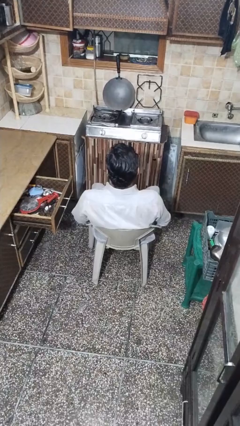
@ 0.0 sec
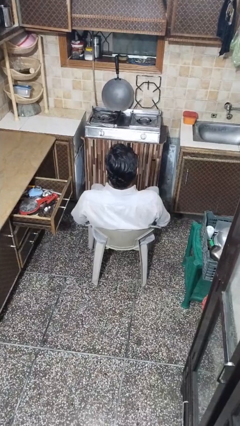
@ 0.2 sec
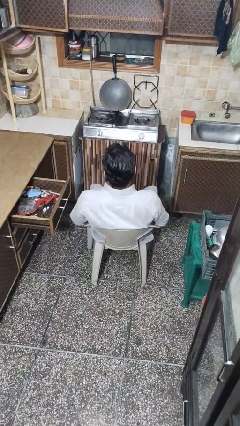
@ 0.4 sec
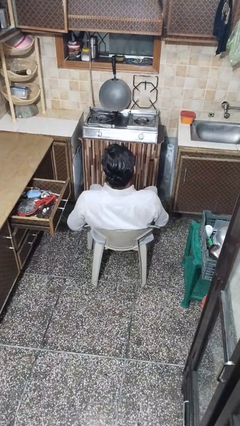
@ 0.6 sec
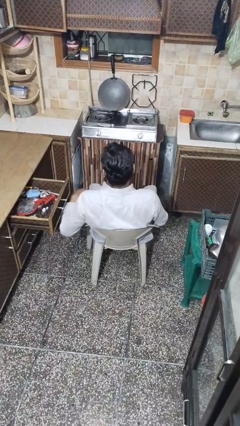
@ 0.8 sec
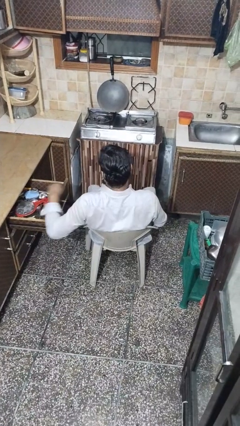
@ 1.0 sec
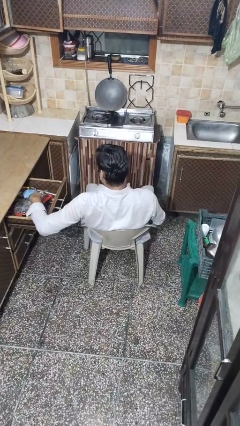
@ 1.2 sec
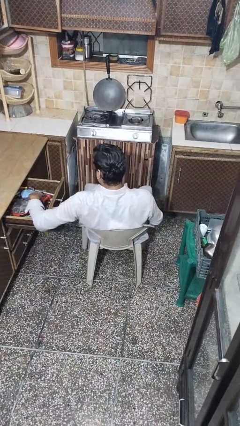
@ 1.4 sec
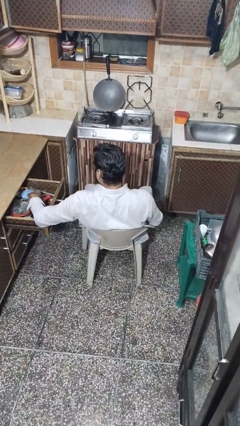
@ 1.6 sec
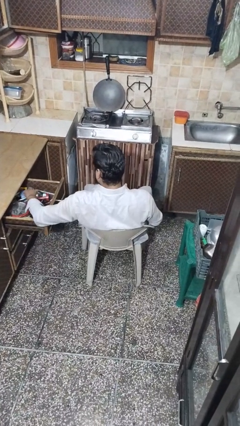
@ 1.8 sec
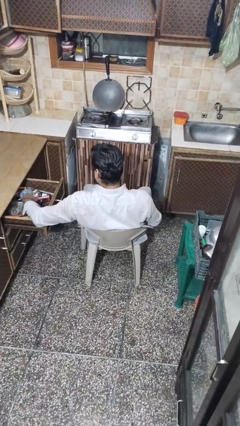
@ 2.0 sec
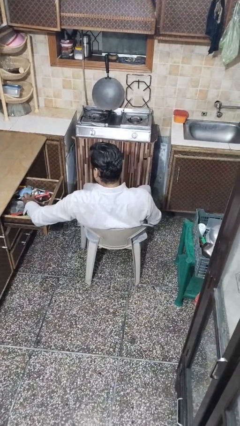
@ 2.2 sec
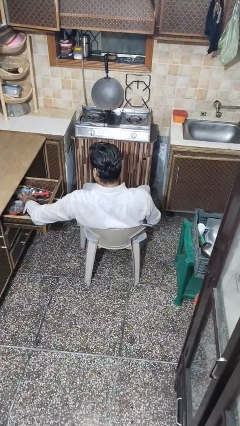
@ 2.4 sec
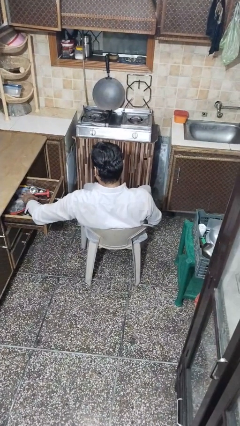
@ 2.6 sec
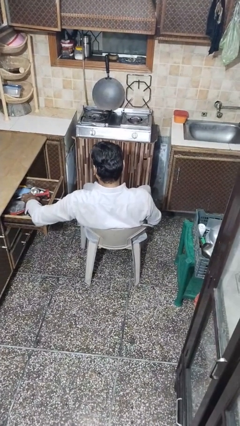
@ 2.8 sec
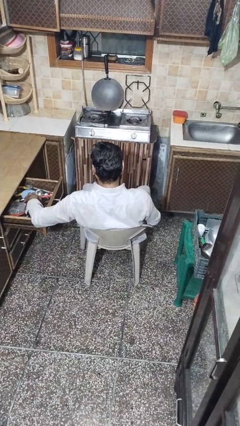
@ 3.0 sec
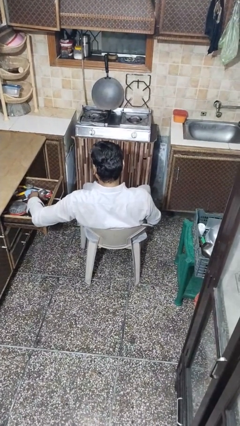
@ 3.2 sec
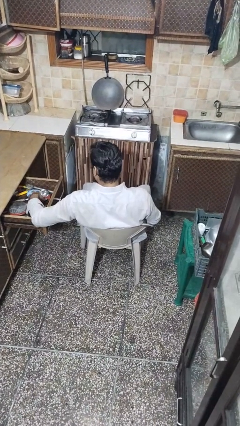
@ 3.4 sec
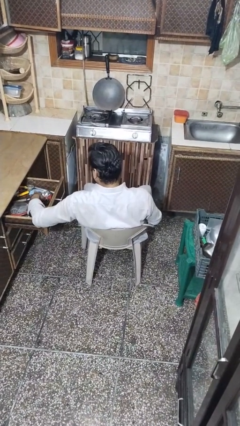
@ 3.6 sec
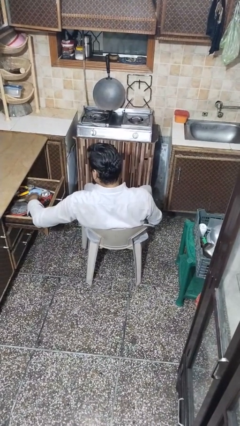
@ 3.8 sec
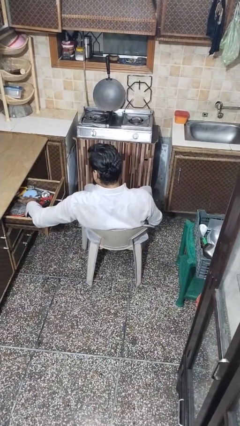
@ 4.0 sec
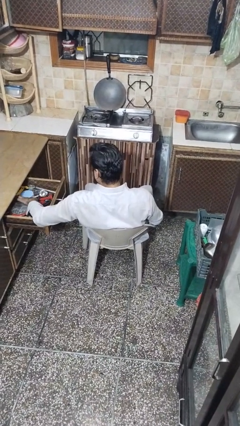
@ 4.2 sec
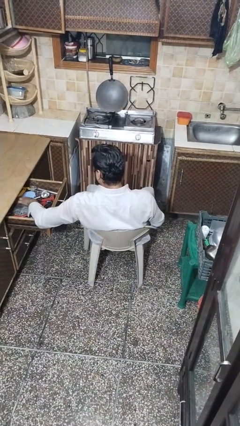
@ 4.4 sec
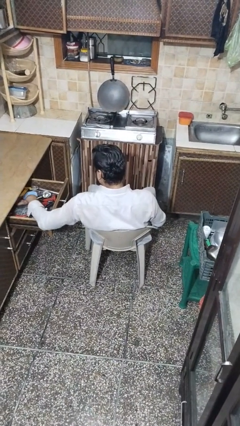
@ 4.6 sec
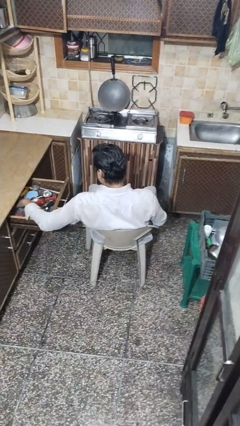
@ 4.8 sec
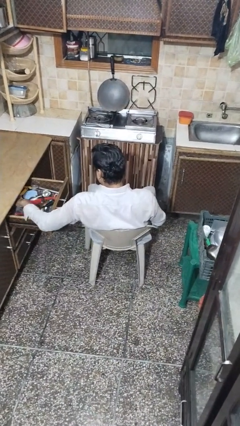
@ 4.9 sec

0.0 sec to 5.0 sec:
person searches in kitchen drawer

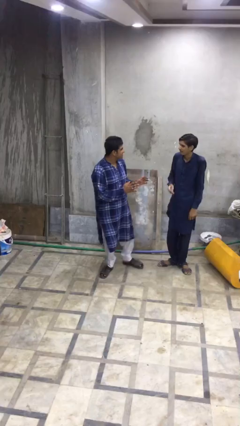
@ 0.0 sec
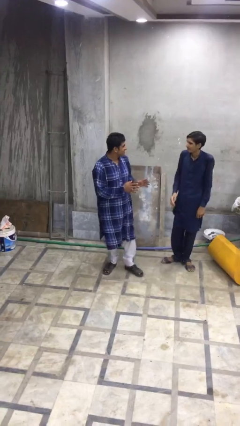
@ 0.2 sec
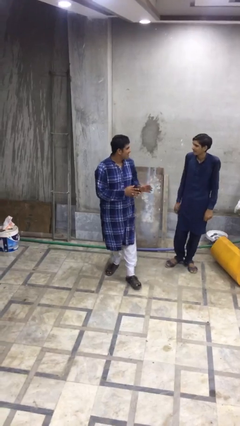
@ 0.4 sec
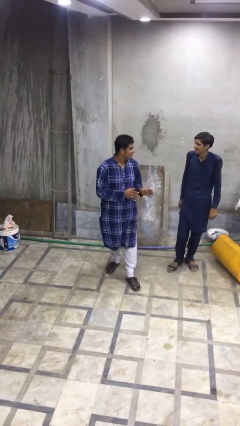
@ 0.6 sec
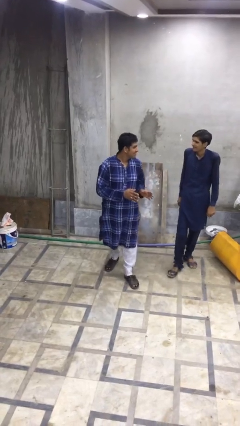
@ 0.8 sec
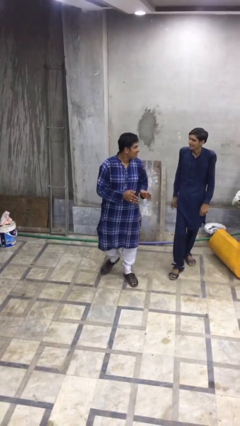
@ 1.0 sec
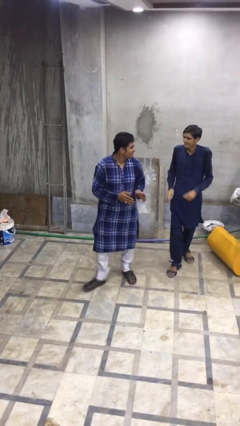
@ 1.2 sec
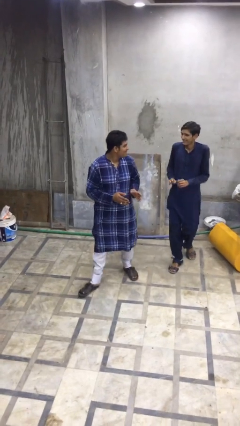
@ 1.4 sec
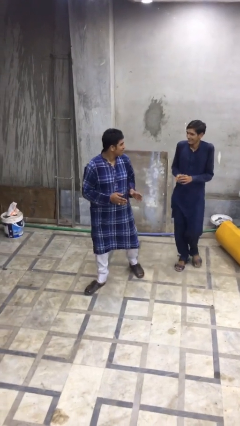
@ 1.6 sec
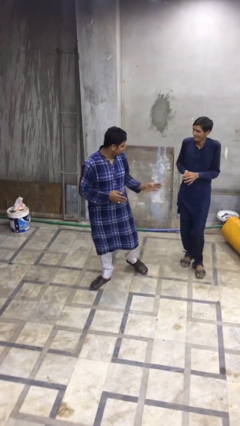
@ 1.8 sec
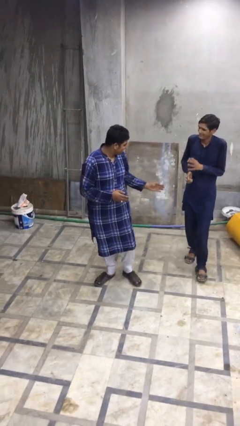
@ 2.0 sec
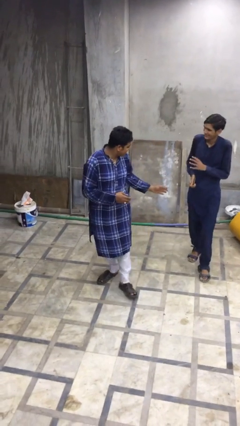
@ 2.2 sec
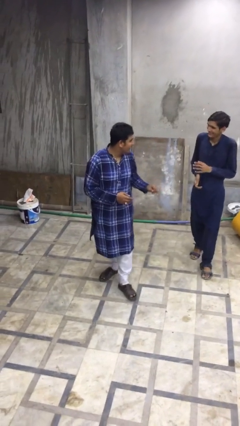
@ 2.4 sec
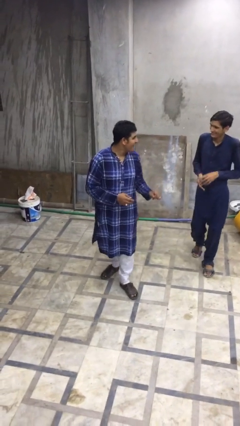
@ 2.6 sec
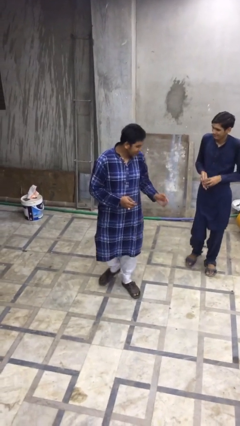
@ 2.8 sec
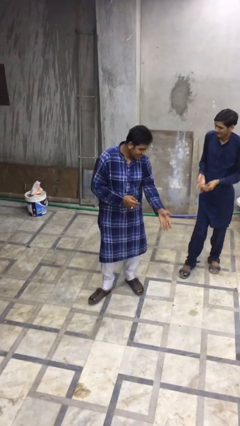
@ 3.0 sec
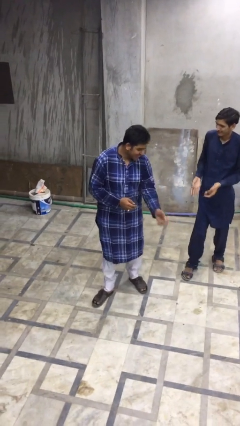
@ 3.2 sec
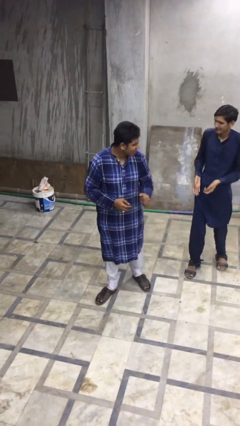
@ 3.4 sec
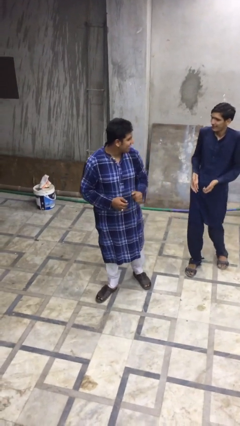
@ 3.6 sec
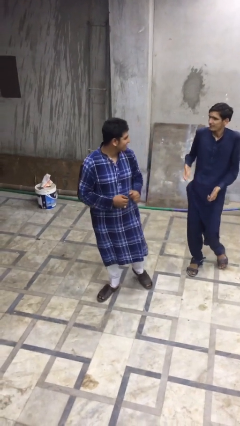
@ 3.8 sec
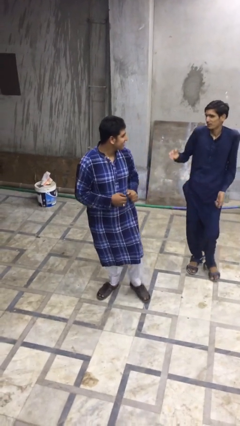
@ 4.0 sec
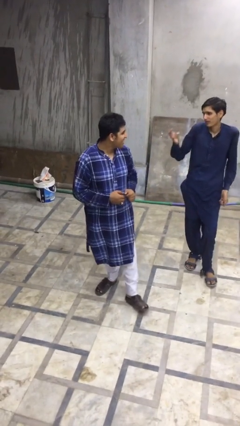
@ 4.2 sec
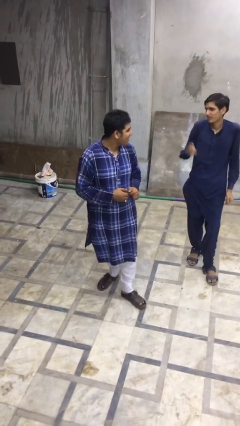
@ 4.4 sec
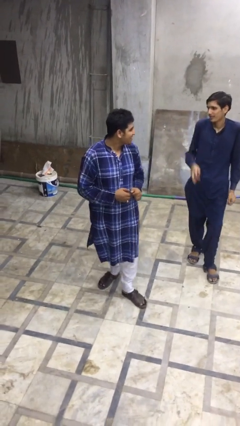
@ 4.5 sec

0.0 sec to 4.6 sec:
person talks to person

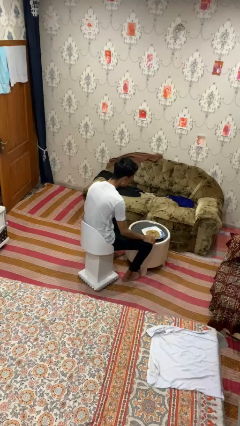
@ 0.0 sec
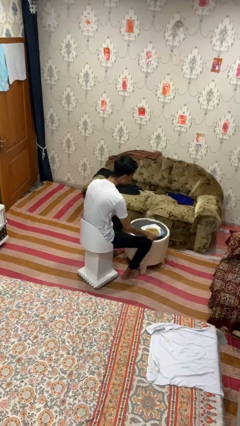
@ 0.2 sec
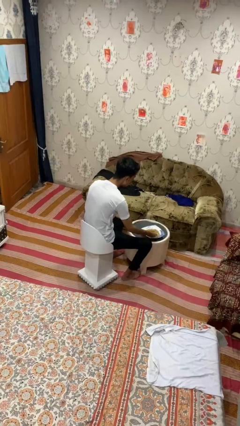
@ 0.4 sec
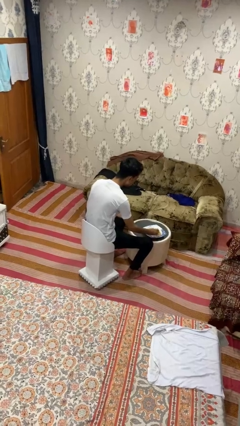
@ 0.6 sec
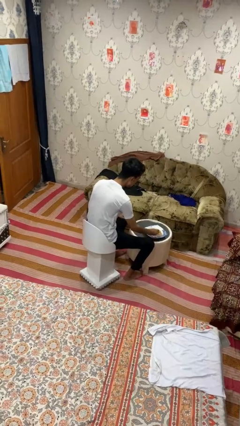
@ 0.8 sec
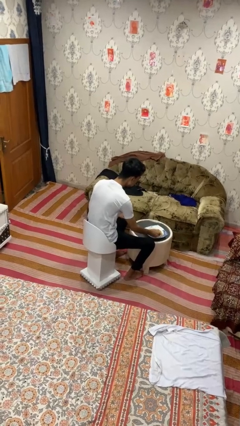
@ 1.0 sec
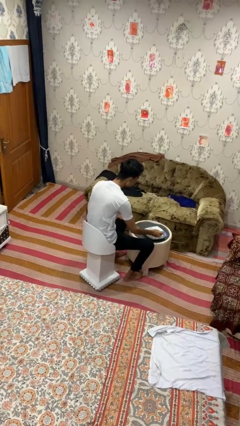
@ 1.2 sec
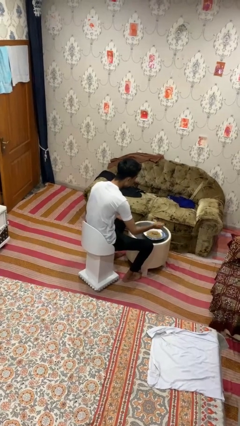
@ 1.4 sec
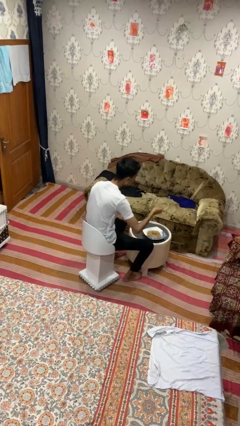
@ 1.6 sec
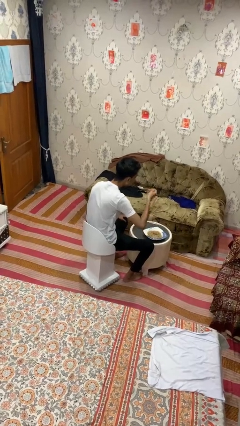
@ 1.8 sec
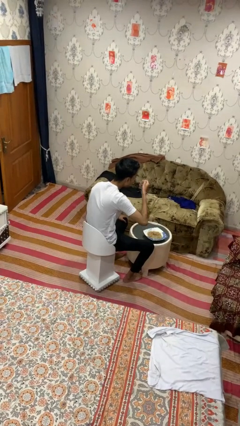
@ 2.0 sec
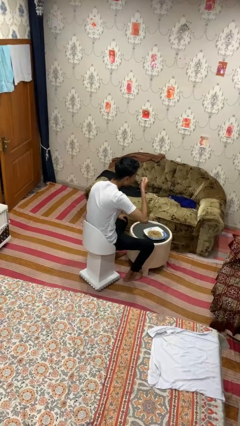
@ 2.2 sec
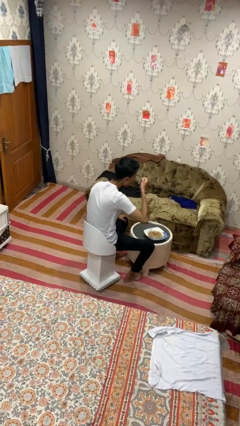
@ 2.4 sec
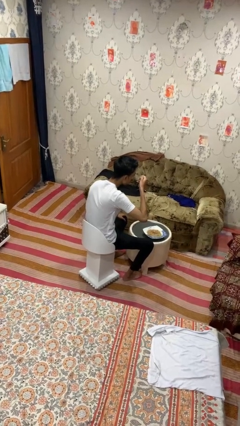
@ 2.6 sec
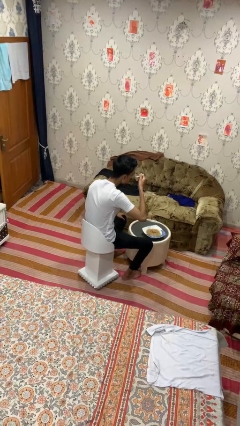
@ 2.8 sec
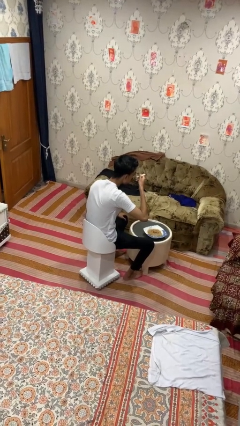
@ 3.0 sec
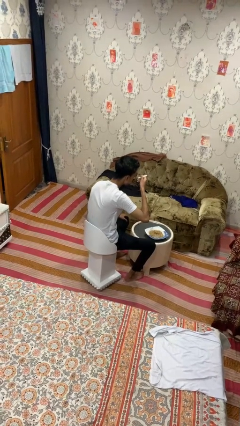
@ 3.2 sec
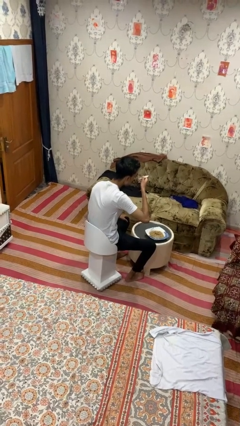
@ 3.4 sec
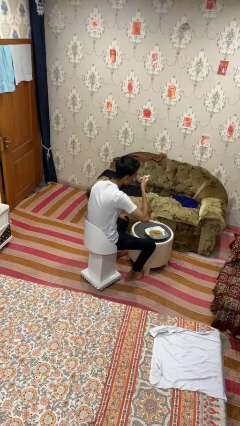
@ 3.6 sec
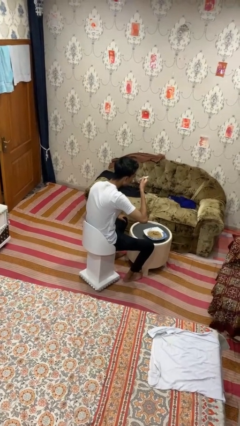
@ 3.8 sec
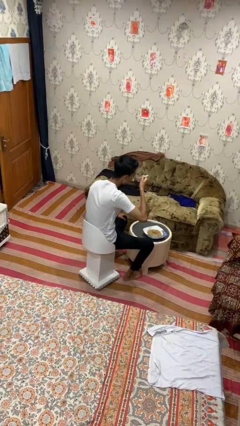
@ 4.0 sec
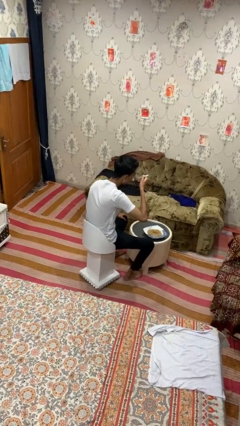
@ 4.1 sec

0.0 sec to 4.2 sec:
person eats with utensil

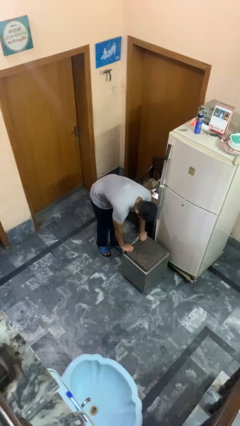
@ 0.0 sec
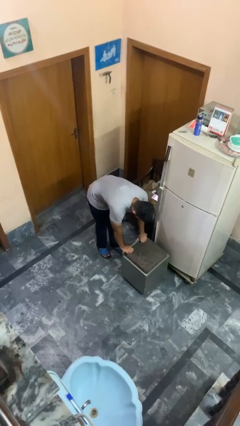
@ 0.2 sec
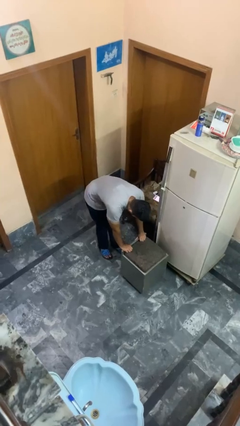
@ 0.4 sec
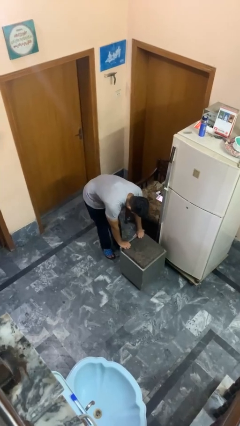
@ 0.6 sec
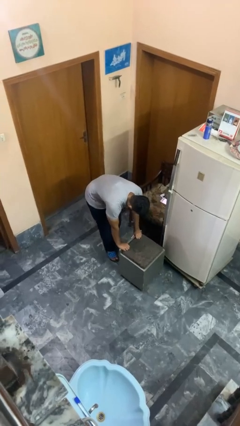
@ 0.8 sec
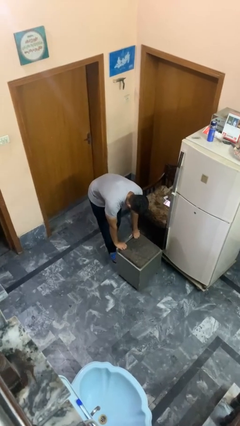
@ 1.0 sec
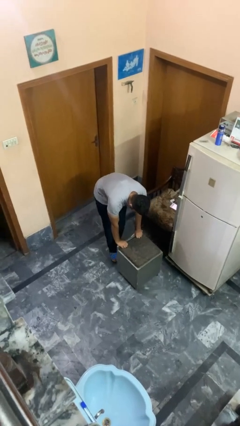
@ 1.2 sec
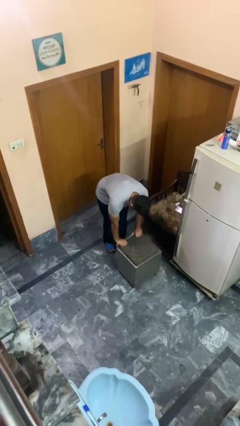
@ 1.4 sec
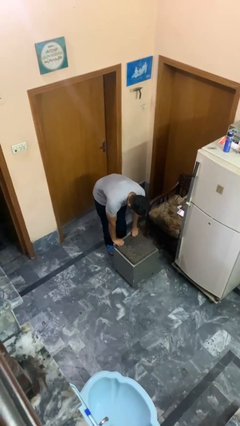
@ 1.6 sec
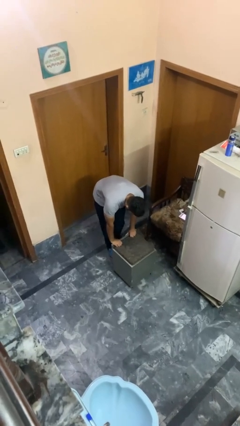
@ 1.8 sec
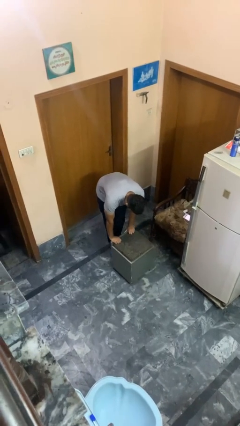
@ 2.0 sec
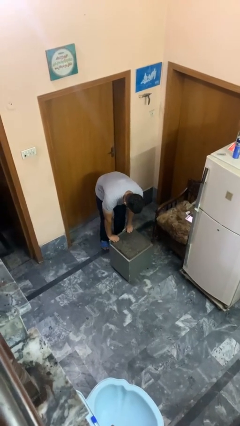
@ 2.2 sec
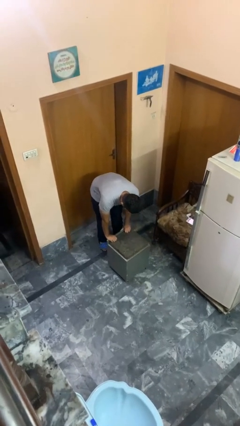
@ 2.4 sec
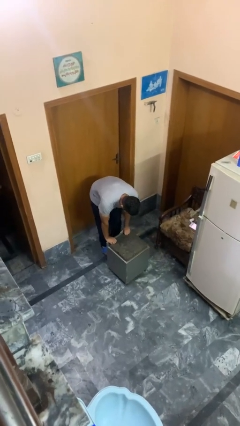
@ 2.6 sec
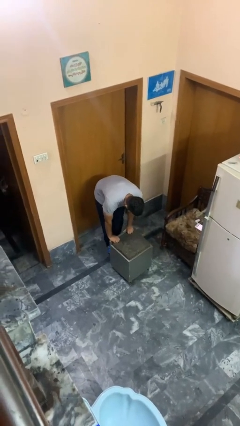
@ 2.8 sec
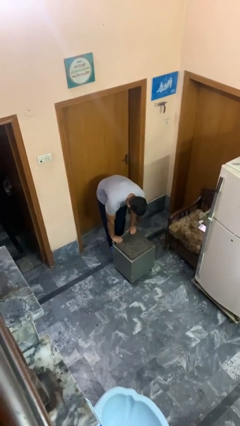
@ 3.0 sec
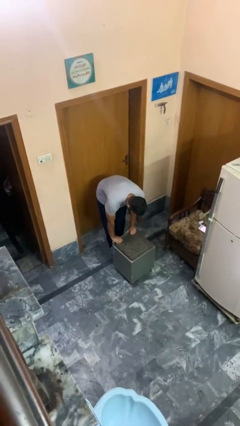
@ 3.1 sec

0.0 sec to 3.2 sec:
person pulls wheeled cart

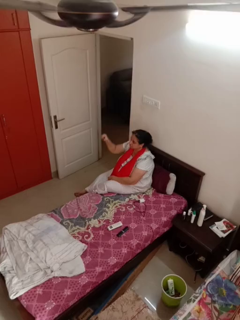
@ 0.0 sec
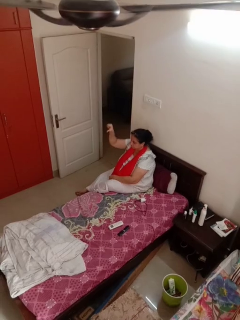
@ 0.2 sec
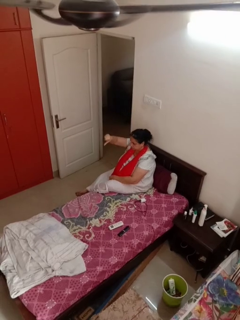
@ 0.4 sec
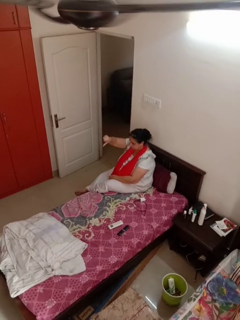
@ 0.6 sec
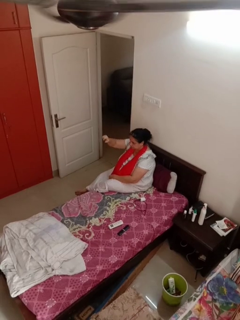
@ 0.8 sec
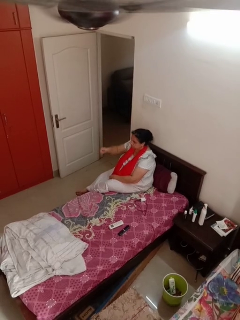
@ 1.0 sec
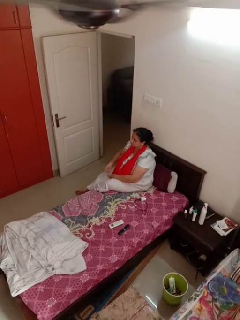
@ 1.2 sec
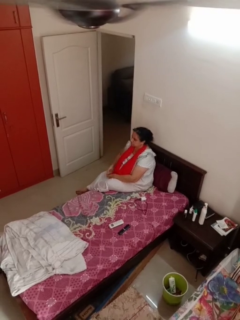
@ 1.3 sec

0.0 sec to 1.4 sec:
person gestures thumbs down
